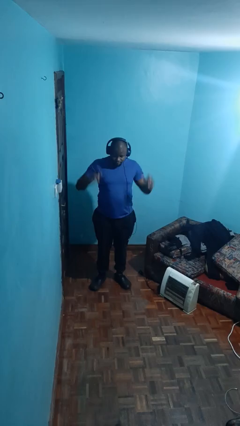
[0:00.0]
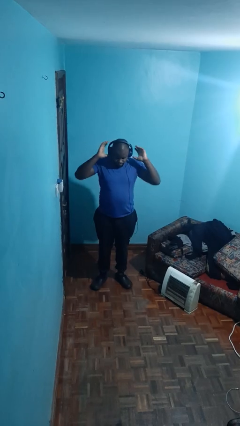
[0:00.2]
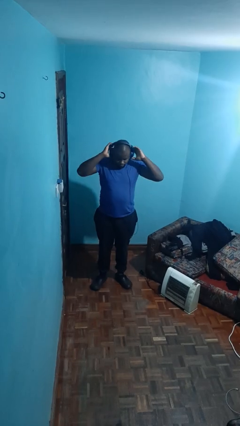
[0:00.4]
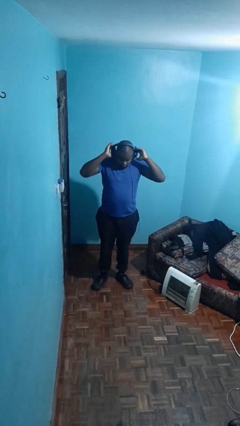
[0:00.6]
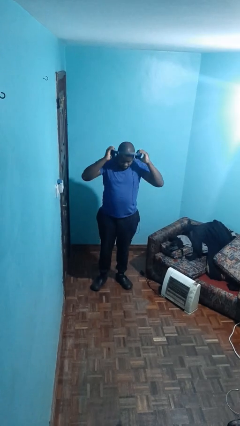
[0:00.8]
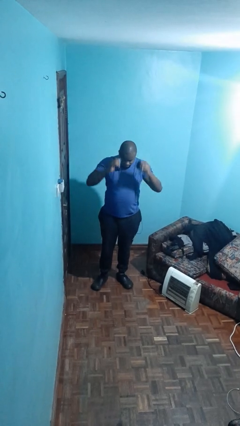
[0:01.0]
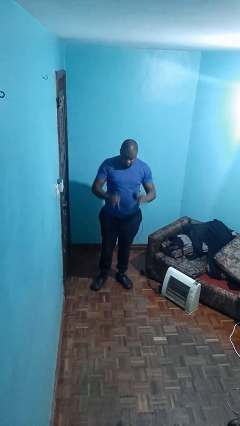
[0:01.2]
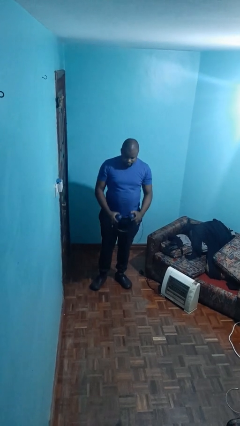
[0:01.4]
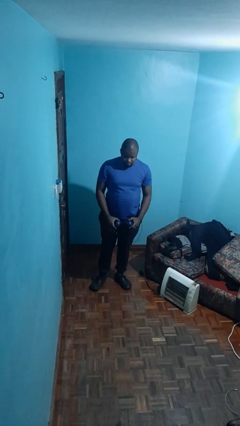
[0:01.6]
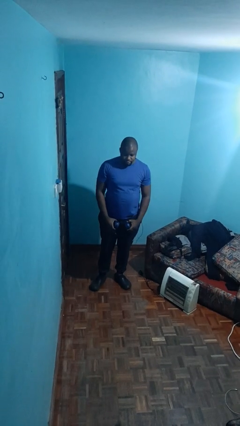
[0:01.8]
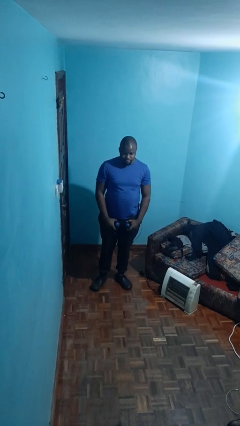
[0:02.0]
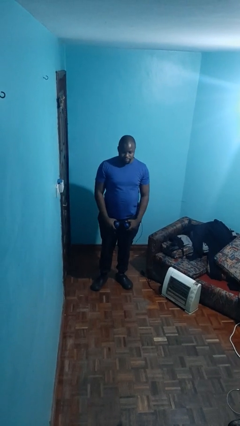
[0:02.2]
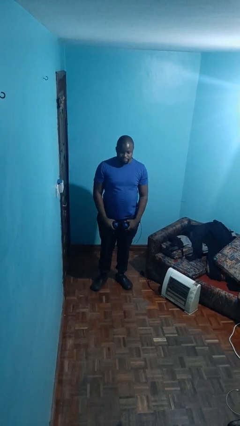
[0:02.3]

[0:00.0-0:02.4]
person takes off headphones

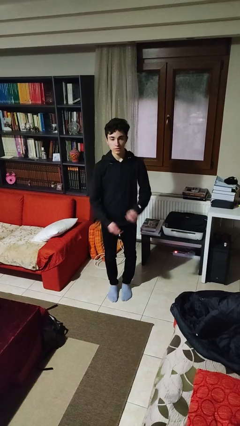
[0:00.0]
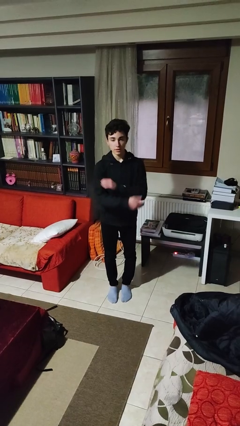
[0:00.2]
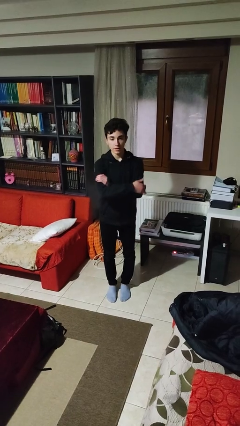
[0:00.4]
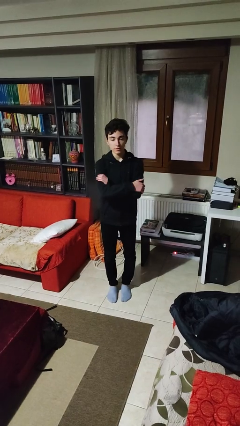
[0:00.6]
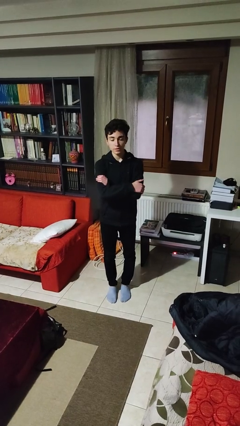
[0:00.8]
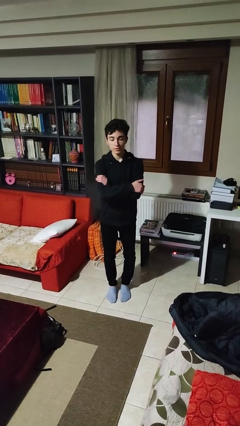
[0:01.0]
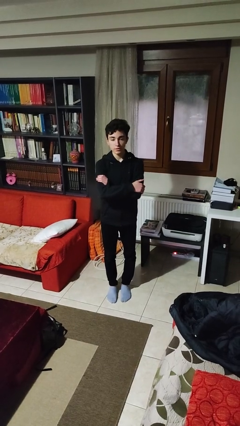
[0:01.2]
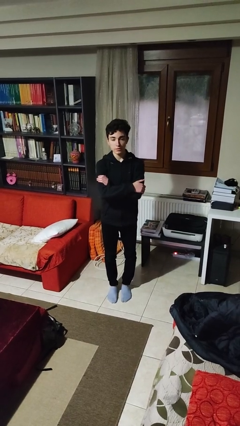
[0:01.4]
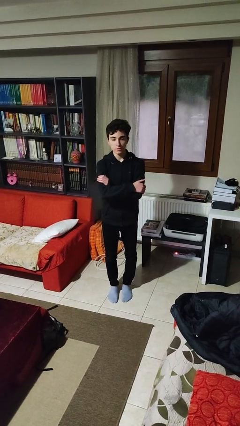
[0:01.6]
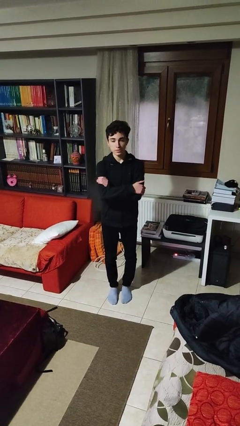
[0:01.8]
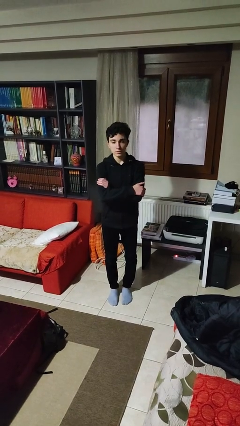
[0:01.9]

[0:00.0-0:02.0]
person crosses arms

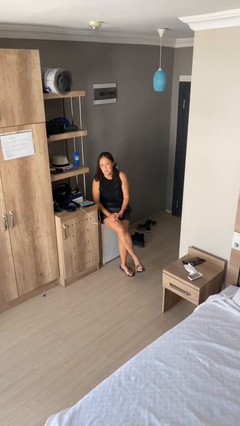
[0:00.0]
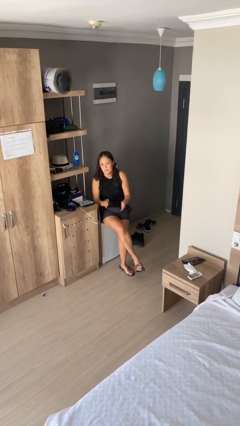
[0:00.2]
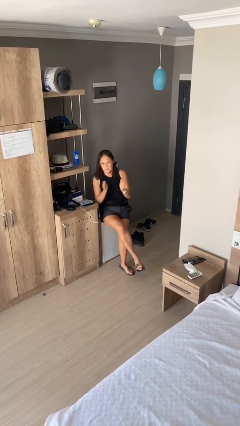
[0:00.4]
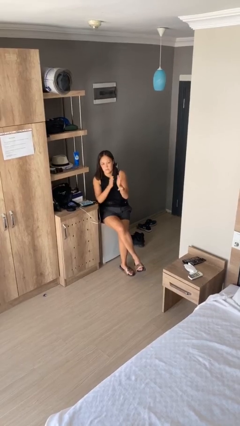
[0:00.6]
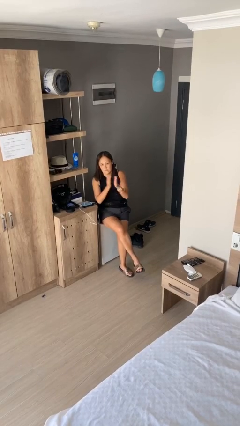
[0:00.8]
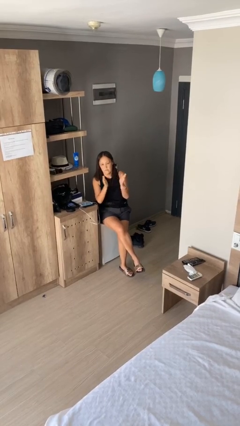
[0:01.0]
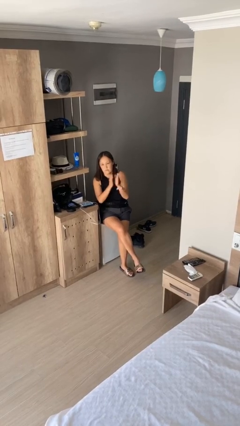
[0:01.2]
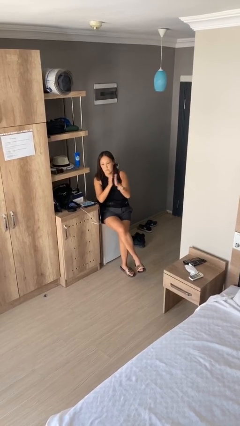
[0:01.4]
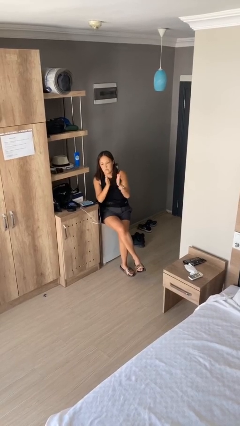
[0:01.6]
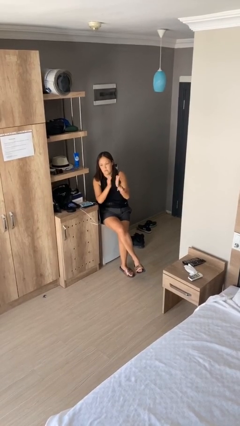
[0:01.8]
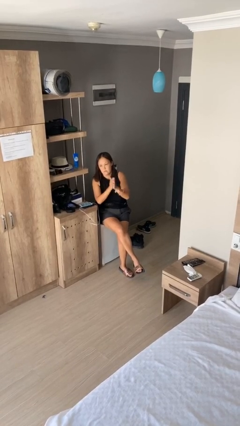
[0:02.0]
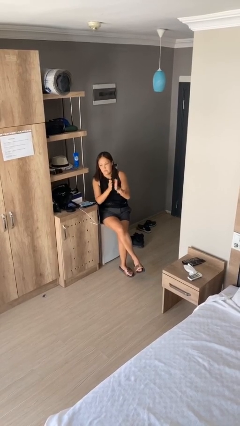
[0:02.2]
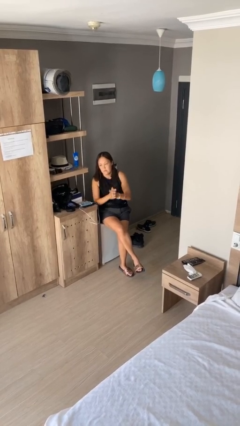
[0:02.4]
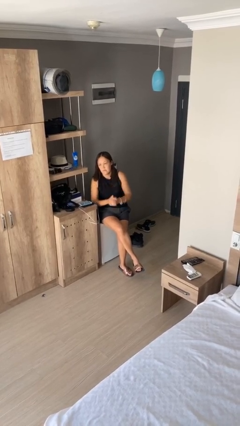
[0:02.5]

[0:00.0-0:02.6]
person claps hands

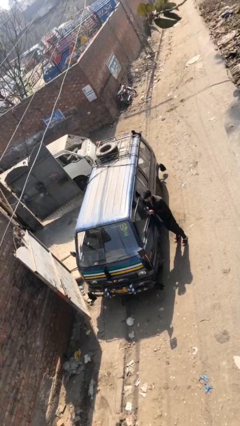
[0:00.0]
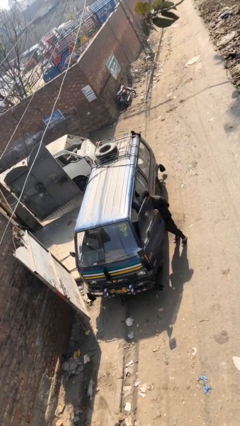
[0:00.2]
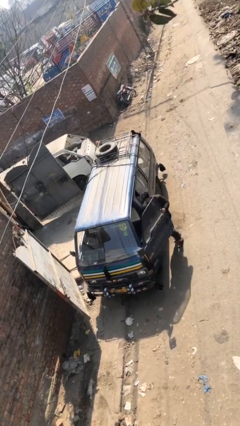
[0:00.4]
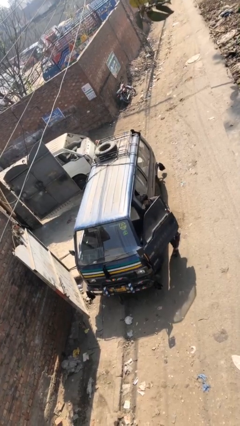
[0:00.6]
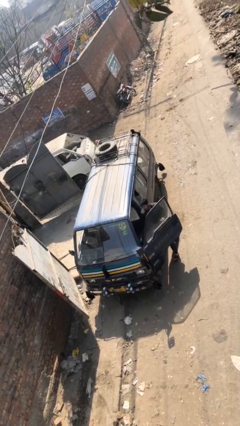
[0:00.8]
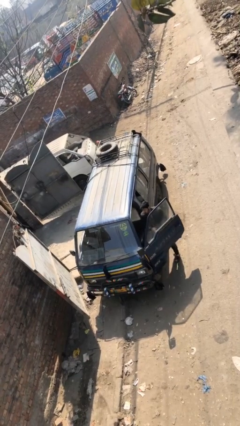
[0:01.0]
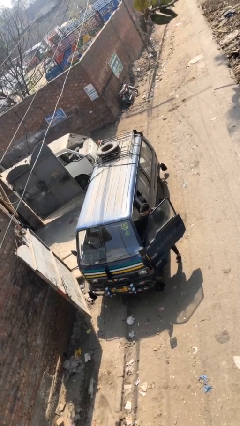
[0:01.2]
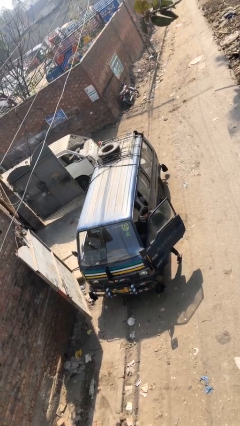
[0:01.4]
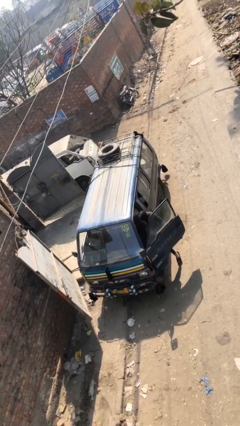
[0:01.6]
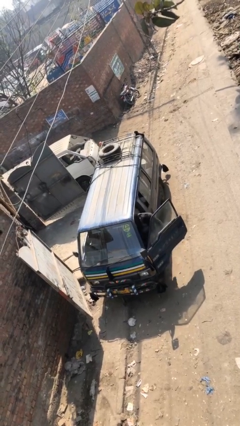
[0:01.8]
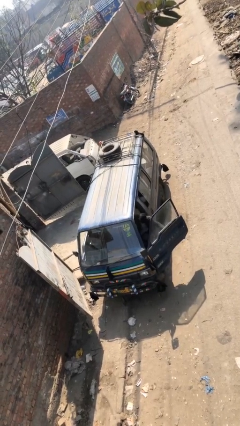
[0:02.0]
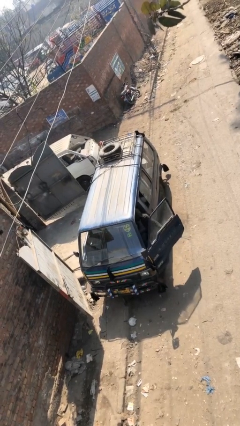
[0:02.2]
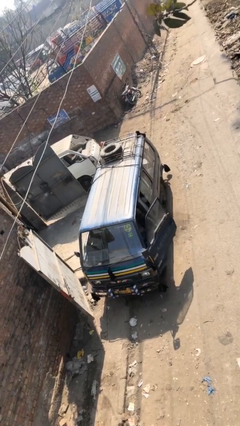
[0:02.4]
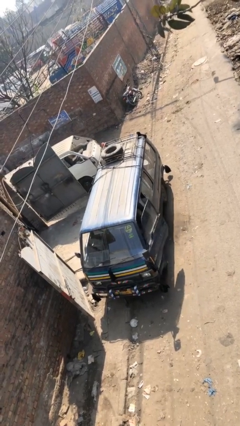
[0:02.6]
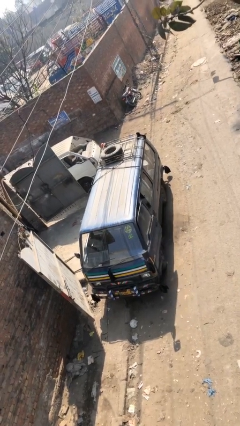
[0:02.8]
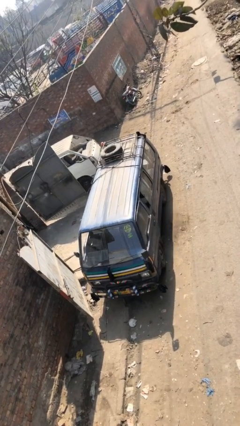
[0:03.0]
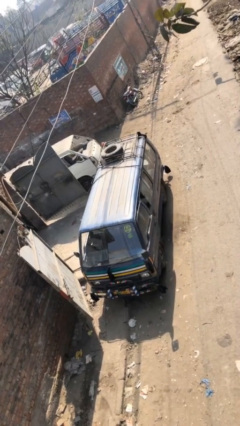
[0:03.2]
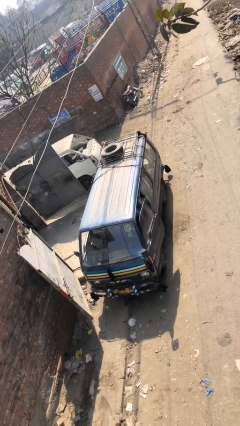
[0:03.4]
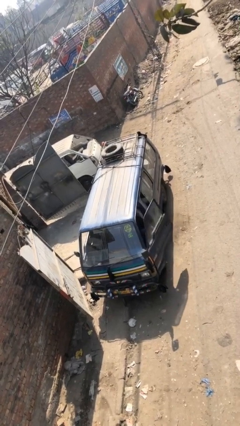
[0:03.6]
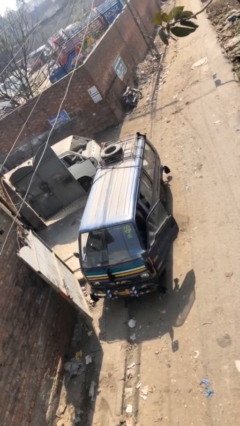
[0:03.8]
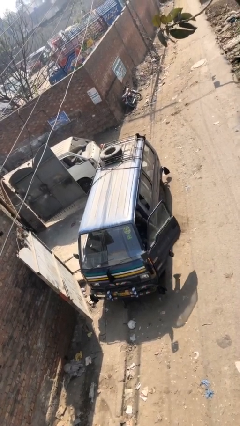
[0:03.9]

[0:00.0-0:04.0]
car picks up person

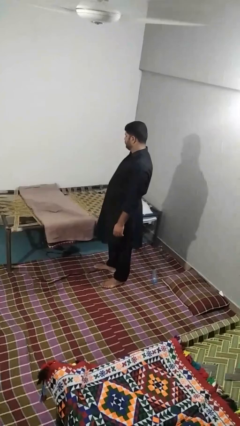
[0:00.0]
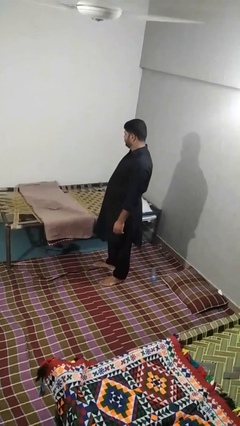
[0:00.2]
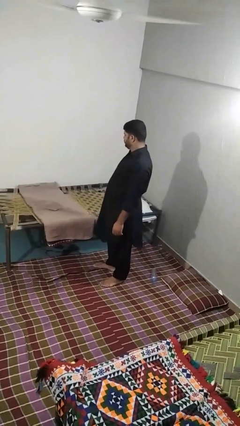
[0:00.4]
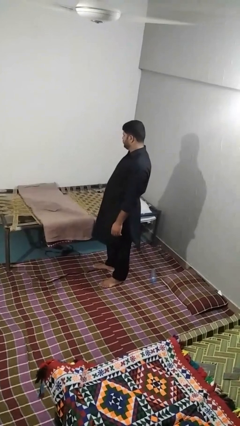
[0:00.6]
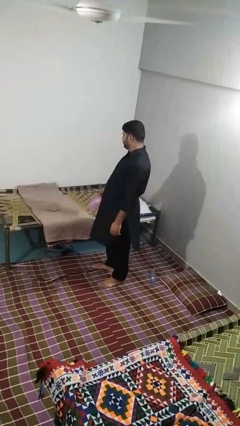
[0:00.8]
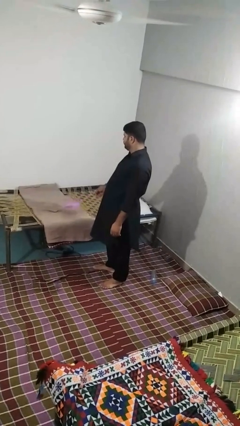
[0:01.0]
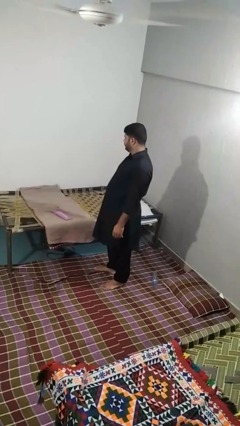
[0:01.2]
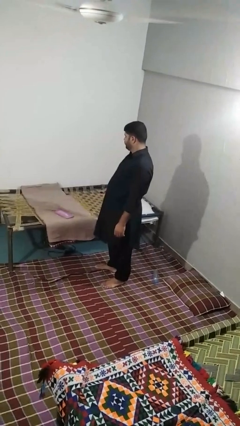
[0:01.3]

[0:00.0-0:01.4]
person puts down object on bed

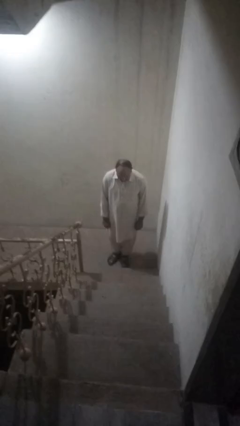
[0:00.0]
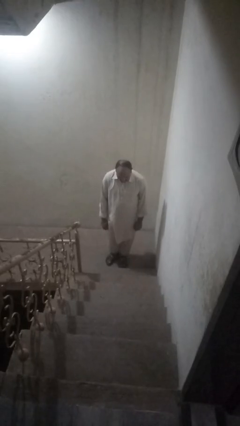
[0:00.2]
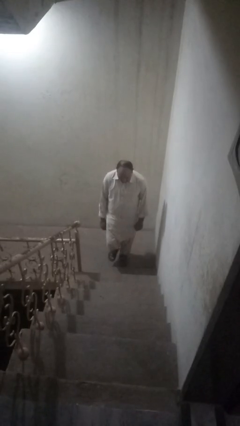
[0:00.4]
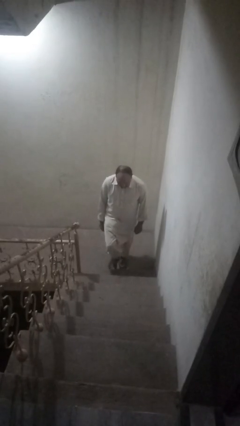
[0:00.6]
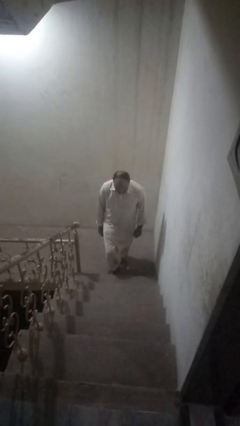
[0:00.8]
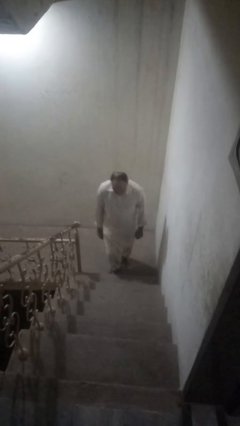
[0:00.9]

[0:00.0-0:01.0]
person climbs up stairs

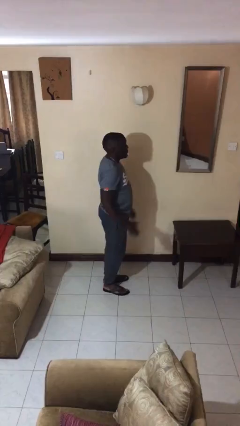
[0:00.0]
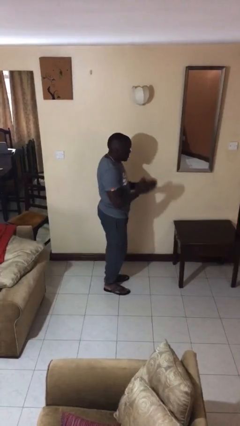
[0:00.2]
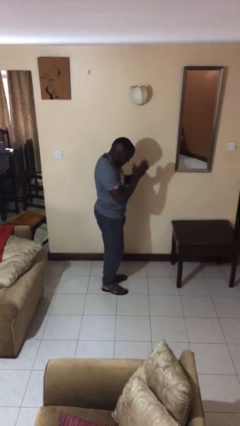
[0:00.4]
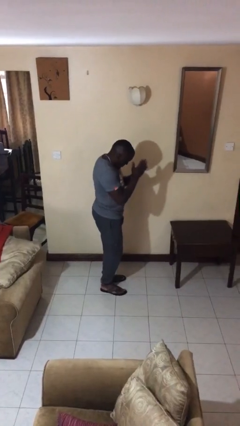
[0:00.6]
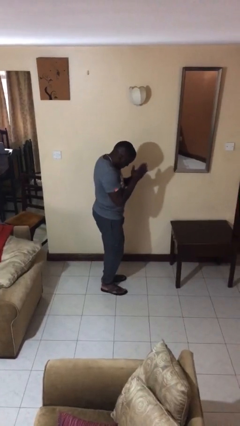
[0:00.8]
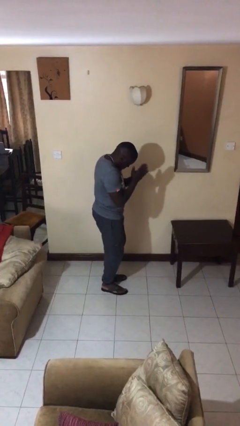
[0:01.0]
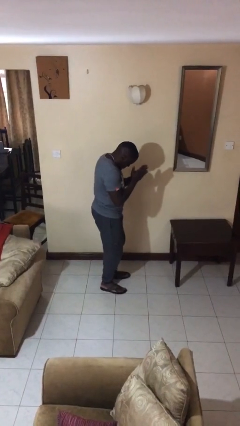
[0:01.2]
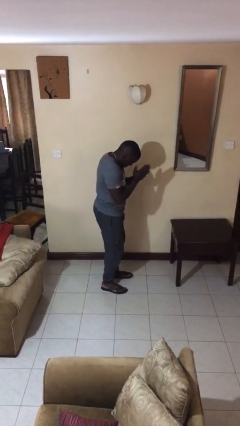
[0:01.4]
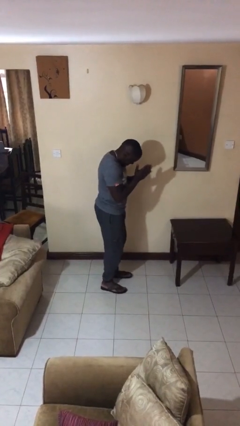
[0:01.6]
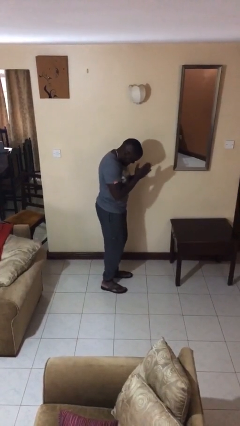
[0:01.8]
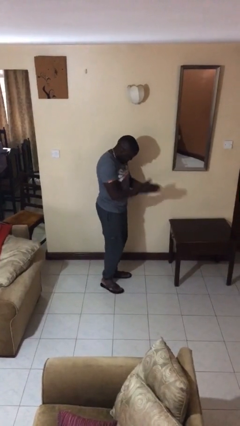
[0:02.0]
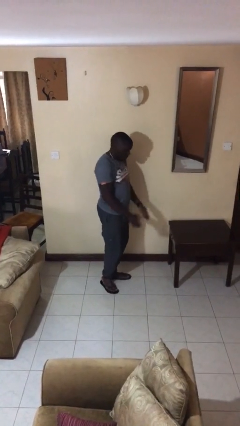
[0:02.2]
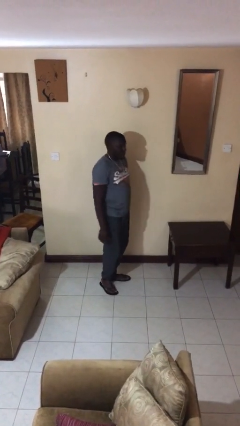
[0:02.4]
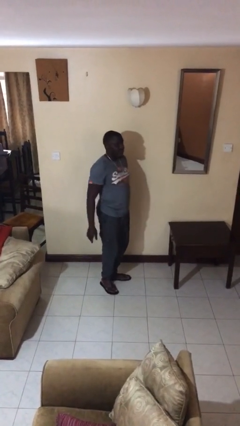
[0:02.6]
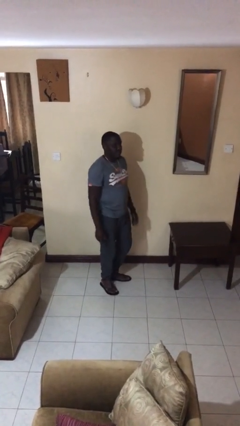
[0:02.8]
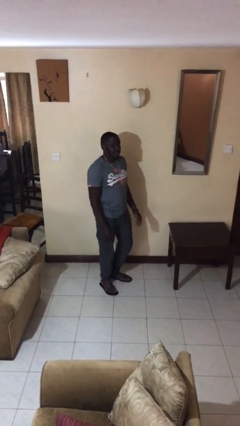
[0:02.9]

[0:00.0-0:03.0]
person prays

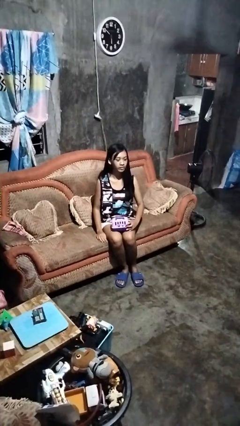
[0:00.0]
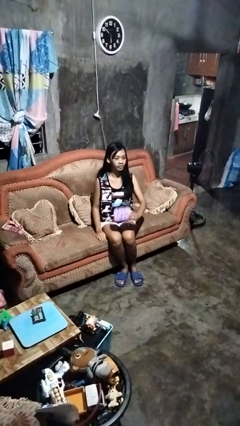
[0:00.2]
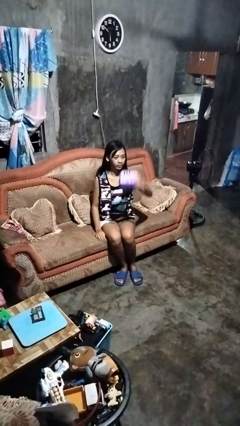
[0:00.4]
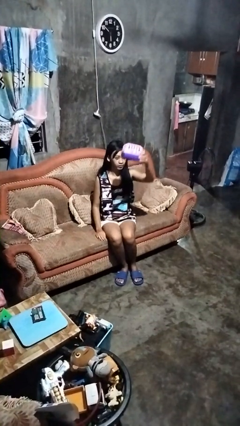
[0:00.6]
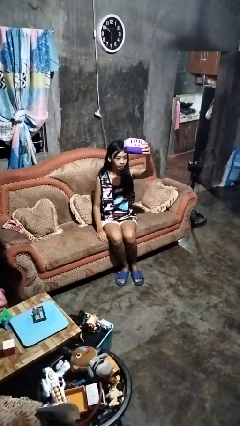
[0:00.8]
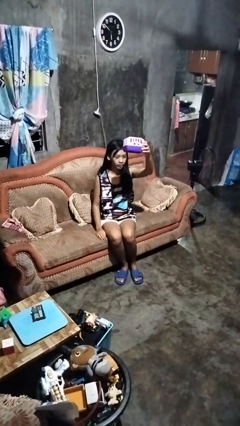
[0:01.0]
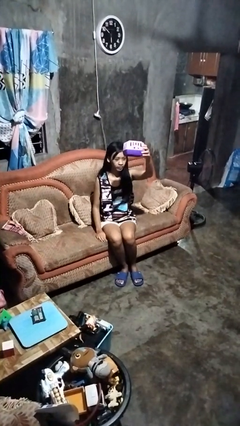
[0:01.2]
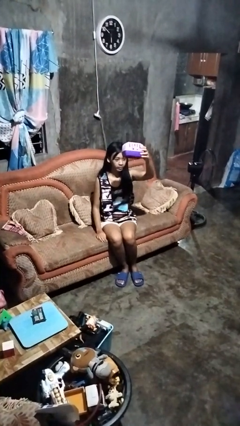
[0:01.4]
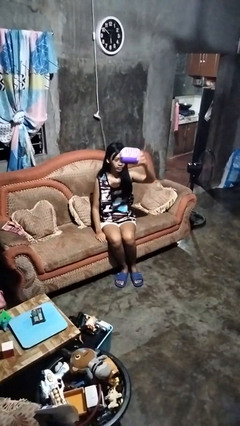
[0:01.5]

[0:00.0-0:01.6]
person holds object above head
